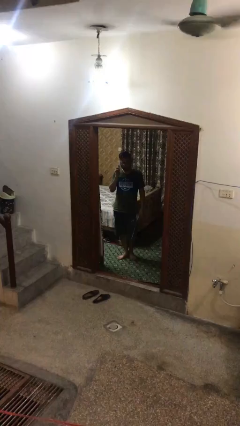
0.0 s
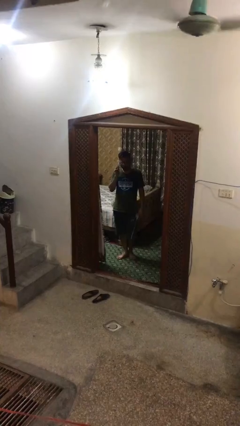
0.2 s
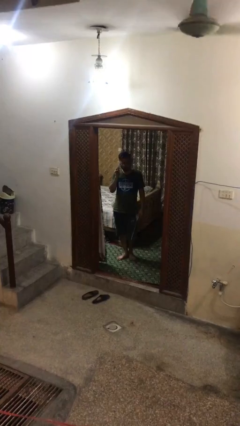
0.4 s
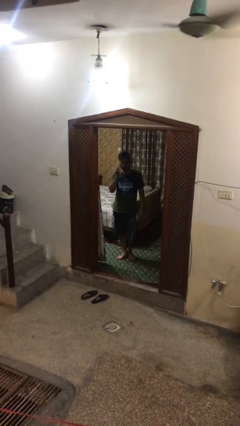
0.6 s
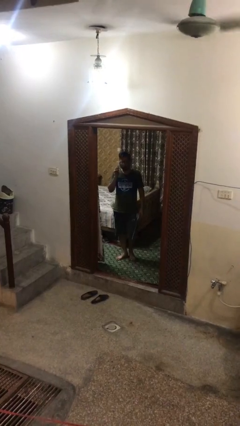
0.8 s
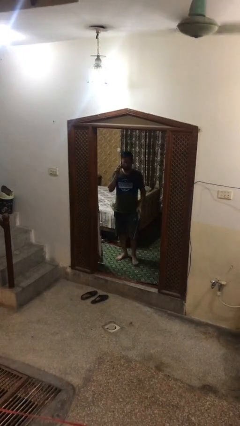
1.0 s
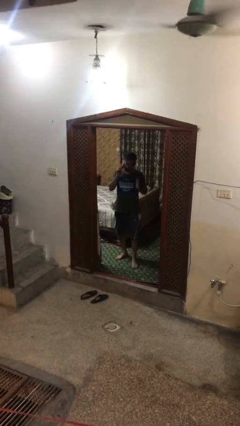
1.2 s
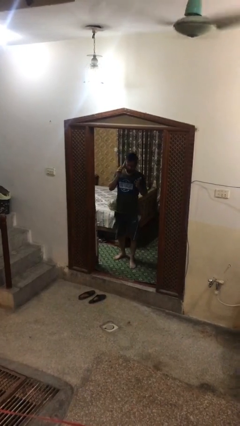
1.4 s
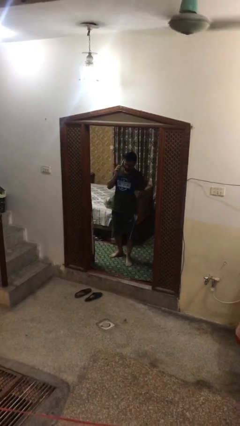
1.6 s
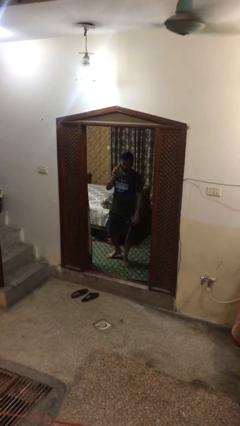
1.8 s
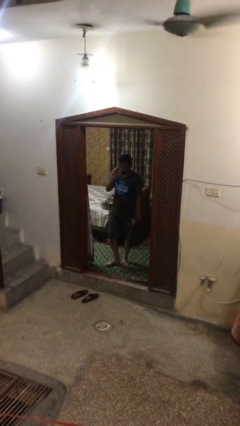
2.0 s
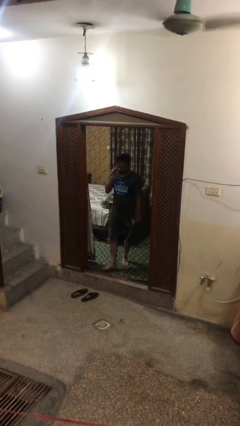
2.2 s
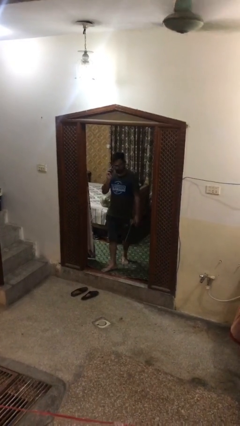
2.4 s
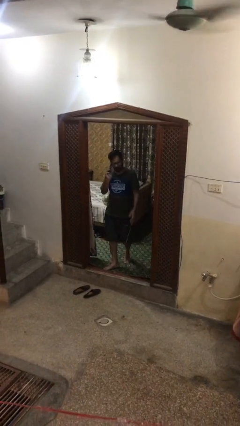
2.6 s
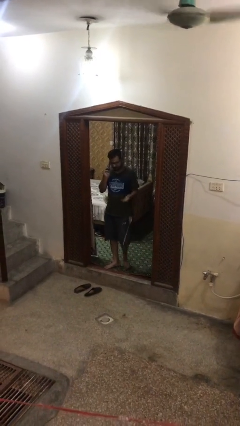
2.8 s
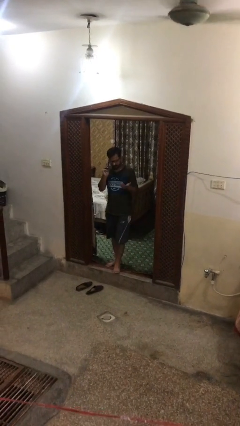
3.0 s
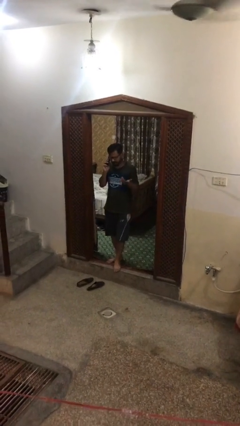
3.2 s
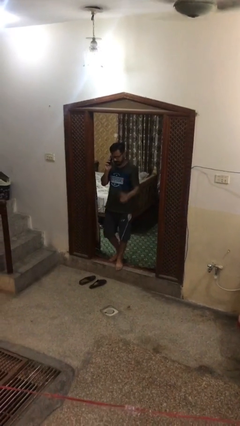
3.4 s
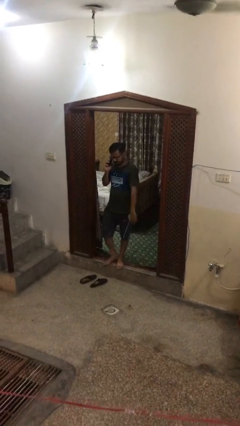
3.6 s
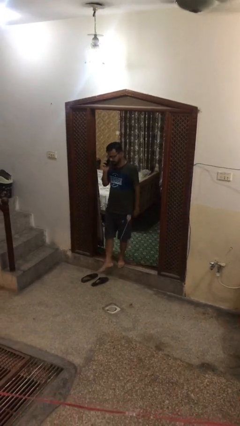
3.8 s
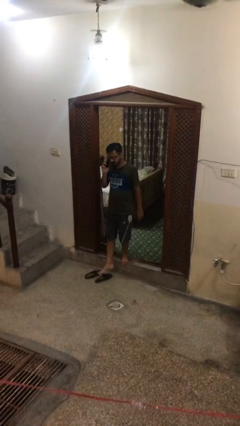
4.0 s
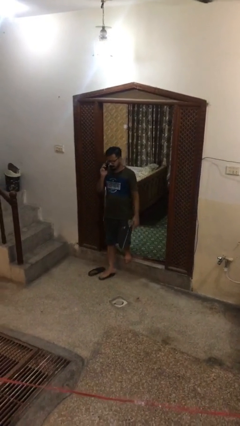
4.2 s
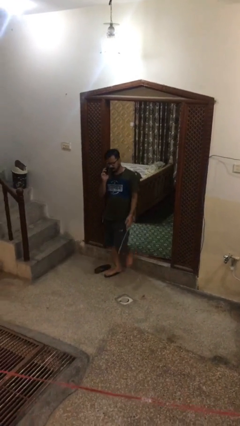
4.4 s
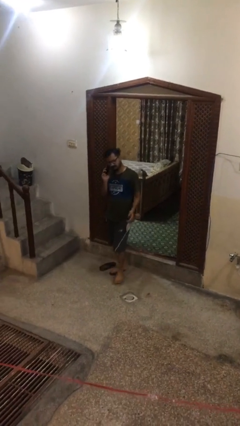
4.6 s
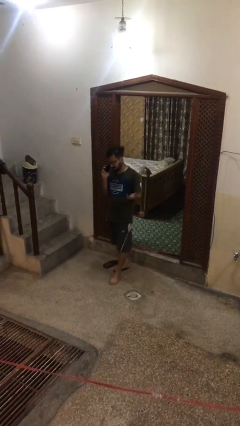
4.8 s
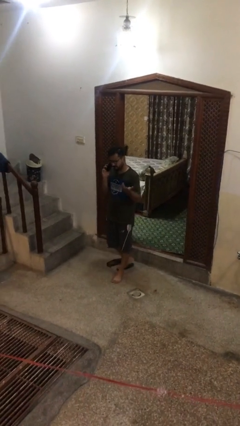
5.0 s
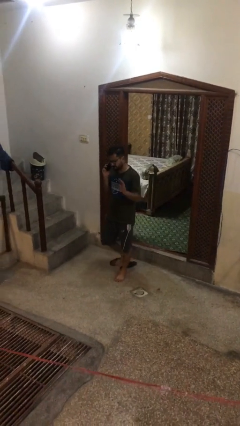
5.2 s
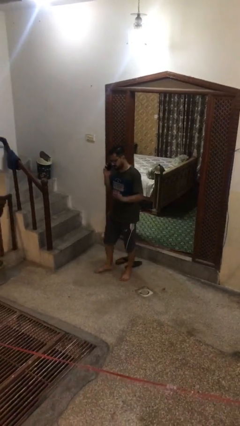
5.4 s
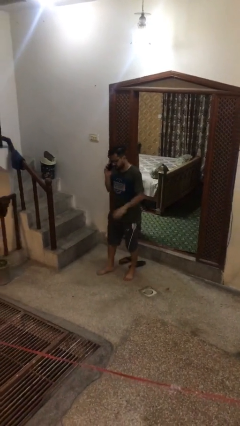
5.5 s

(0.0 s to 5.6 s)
person enters scene through structure

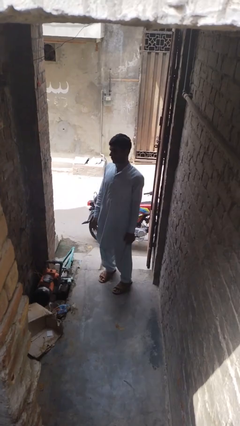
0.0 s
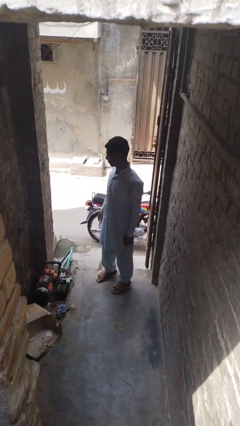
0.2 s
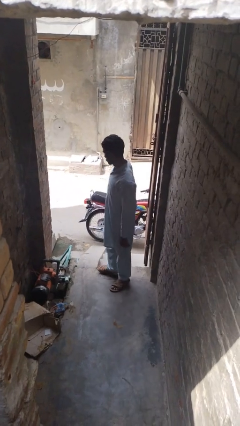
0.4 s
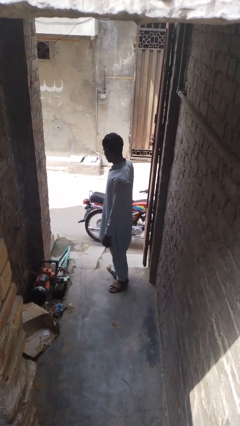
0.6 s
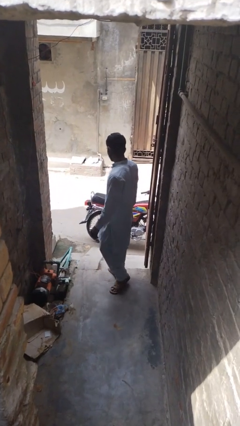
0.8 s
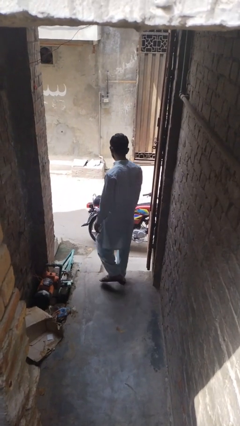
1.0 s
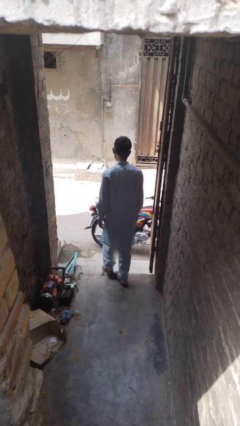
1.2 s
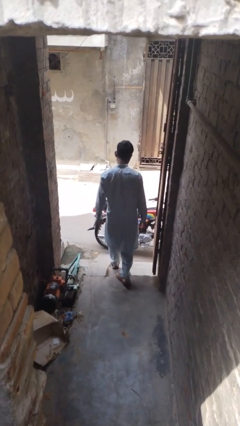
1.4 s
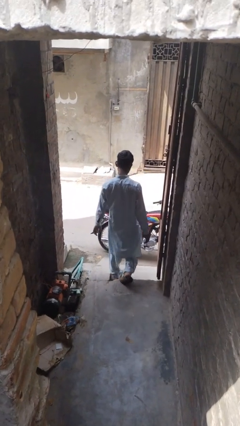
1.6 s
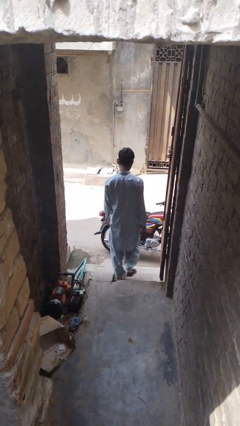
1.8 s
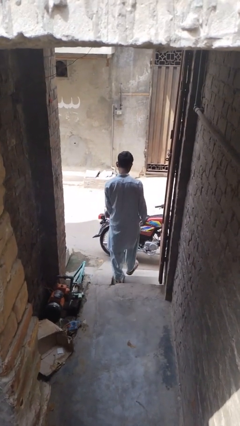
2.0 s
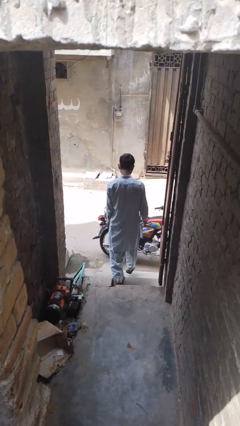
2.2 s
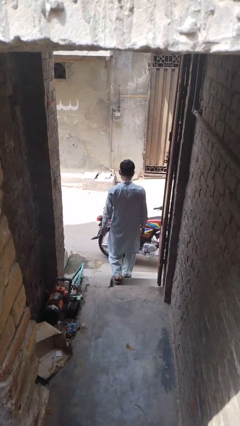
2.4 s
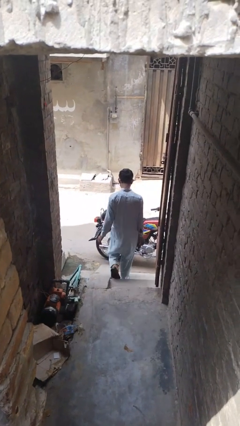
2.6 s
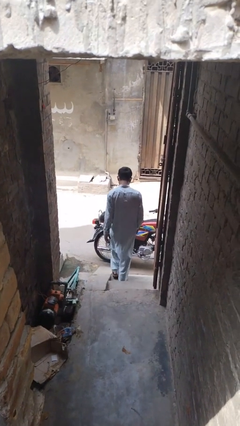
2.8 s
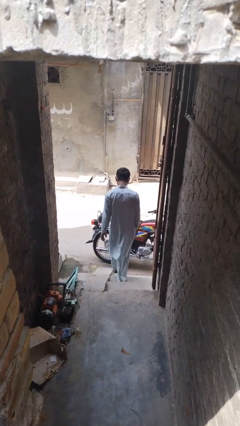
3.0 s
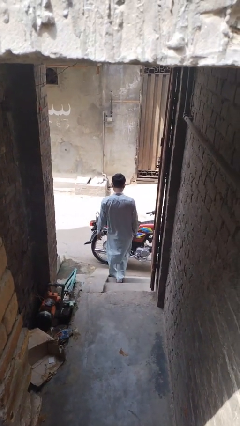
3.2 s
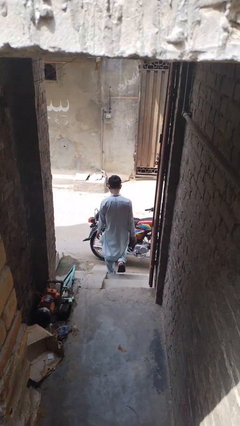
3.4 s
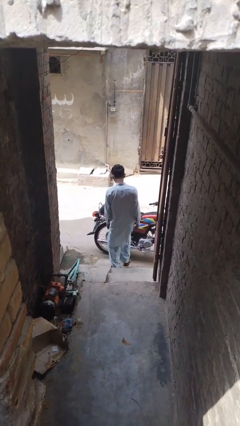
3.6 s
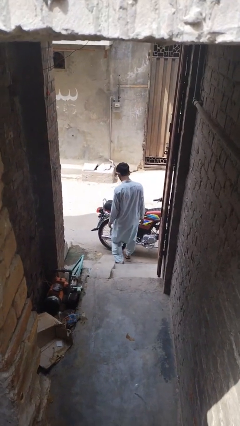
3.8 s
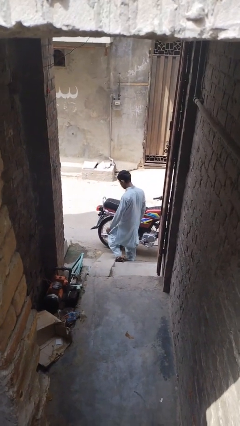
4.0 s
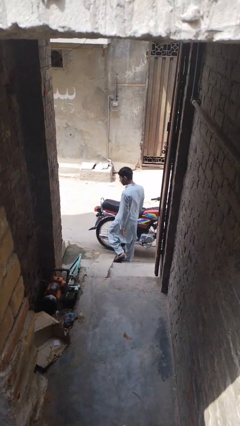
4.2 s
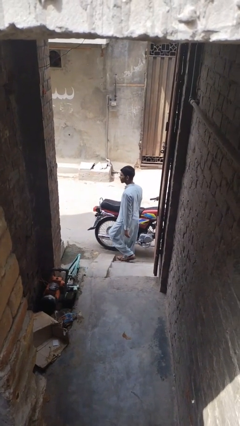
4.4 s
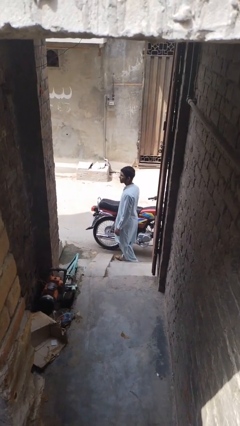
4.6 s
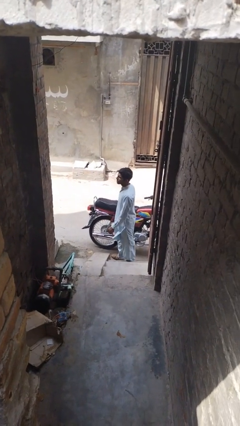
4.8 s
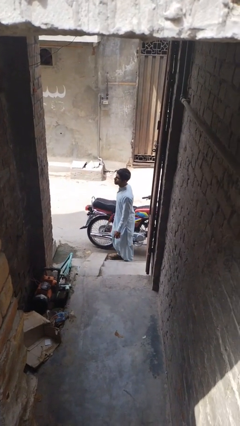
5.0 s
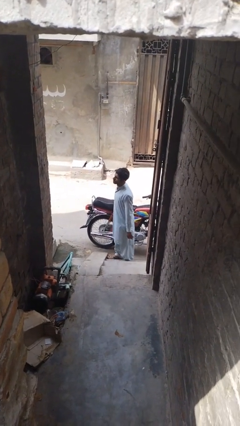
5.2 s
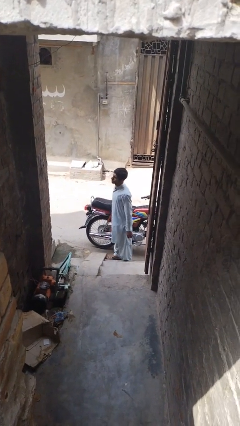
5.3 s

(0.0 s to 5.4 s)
person climbs down stairs

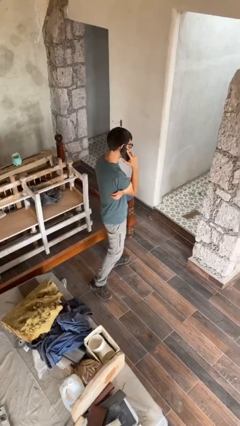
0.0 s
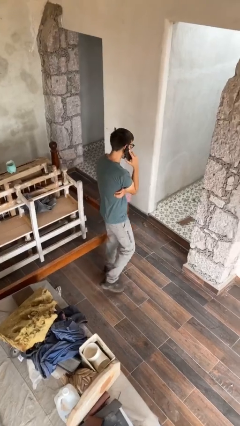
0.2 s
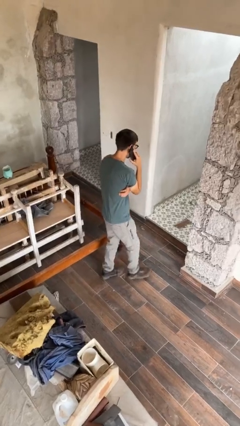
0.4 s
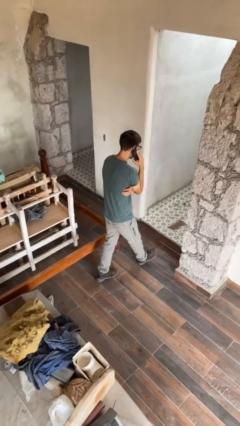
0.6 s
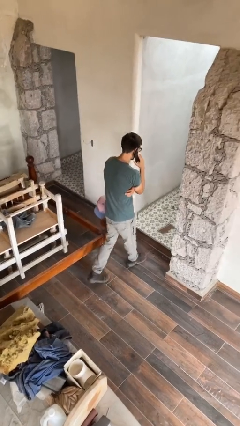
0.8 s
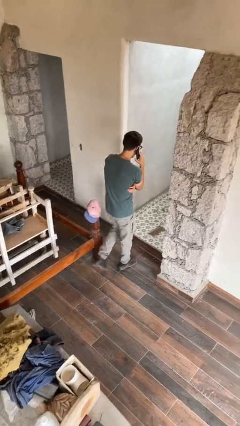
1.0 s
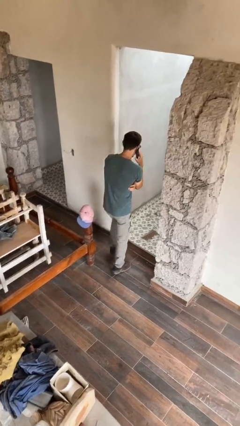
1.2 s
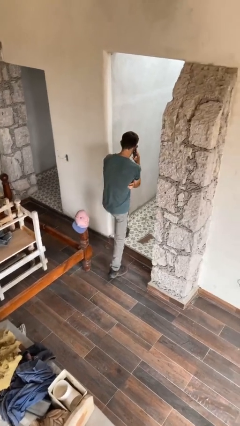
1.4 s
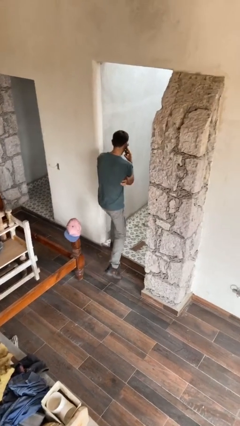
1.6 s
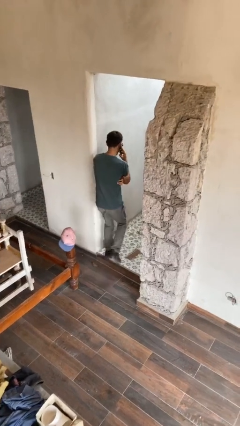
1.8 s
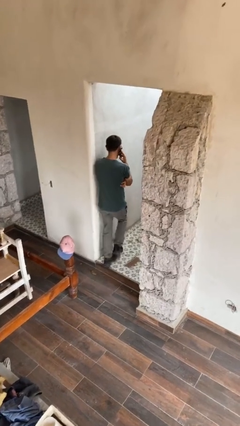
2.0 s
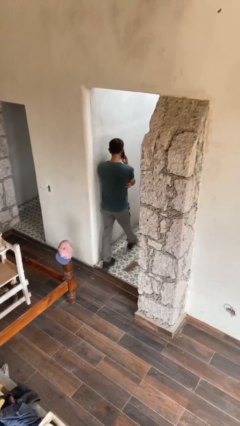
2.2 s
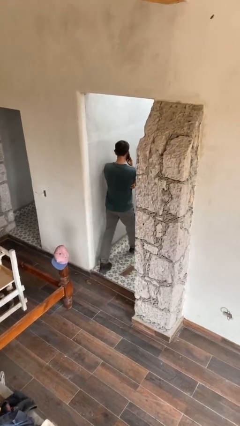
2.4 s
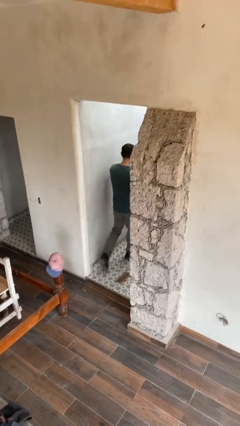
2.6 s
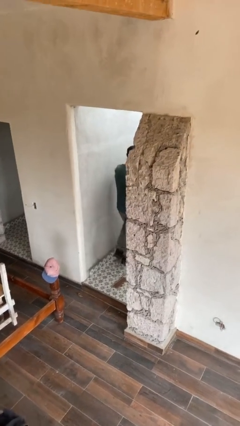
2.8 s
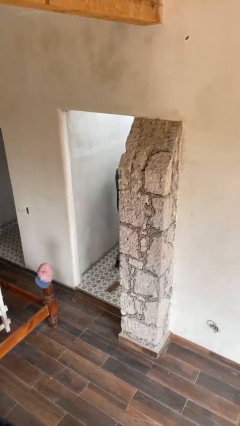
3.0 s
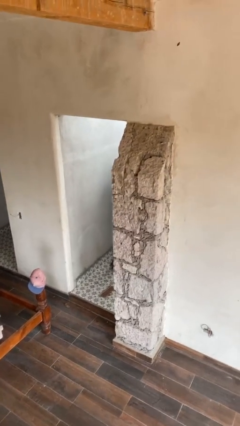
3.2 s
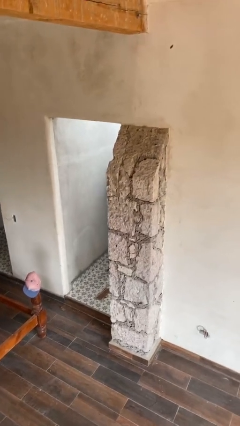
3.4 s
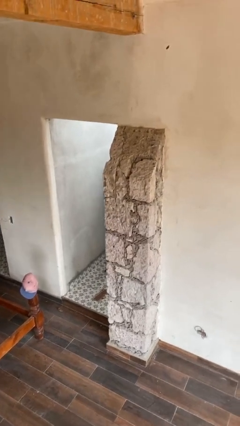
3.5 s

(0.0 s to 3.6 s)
person exits scene through structure

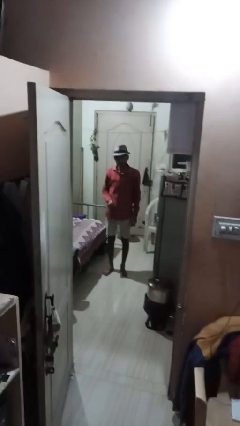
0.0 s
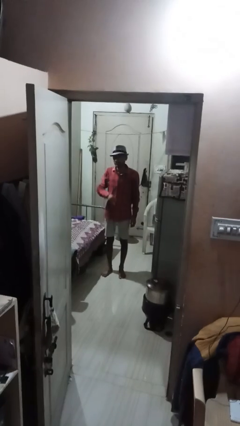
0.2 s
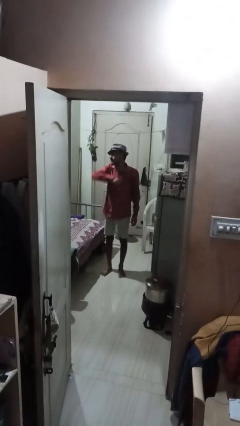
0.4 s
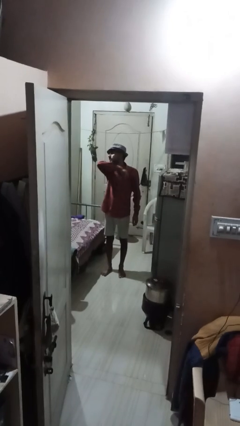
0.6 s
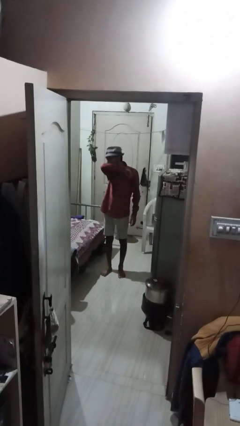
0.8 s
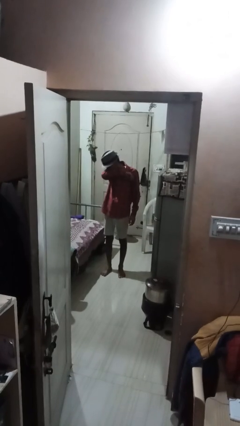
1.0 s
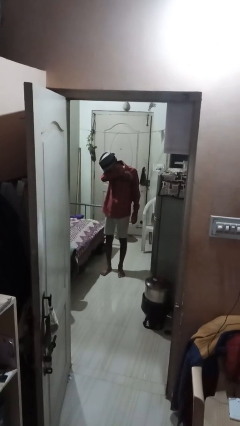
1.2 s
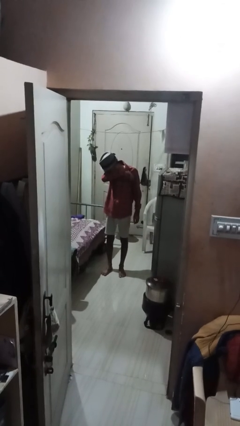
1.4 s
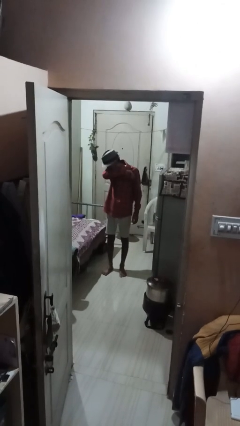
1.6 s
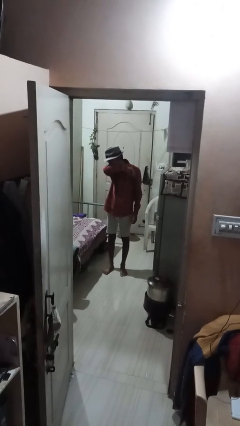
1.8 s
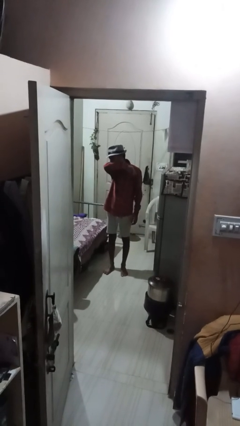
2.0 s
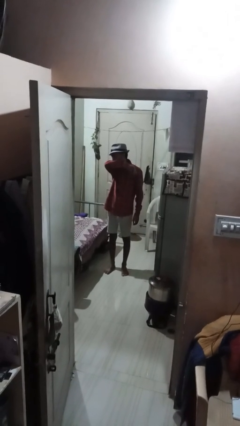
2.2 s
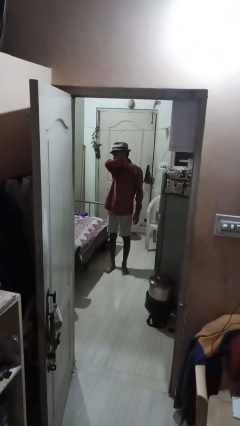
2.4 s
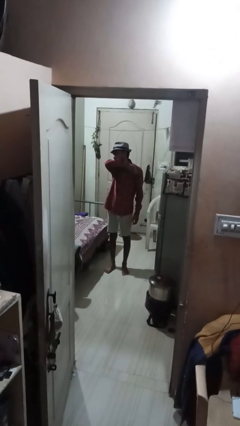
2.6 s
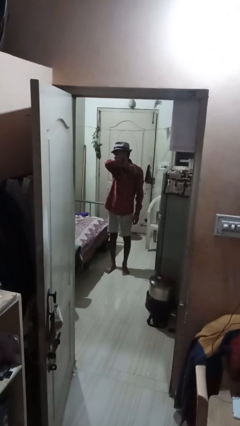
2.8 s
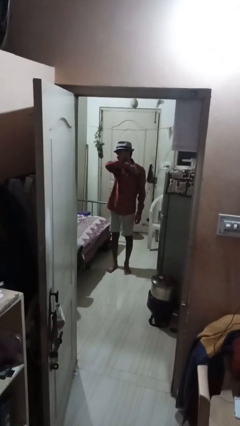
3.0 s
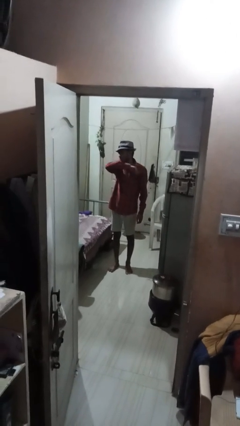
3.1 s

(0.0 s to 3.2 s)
person sneezes into arm
